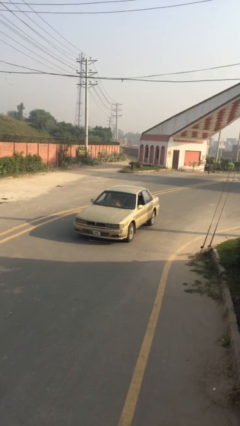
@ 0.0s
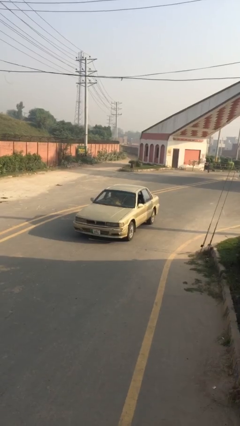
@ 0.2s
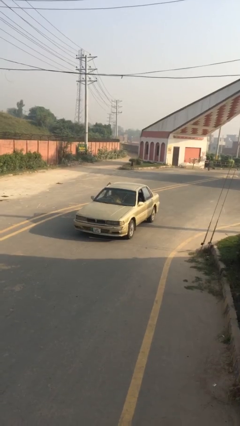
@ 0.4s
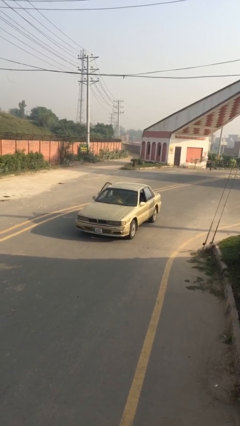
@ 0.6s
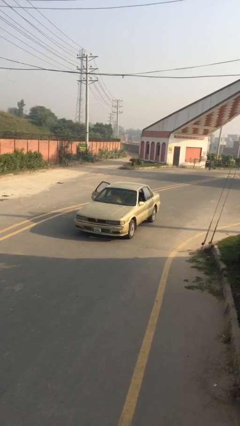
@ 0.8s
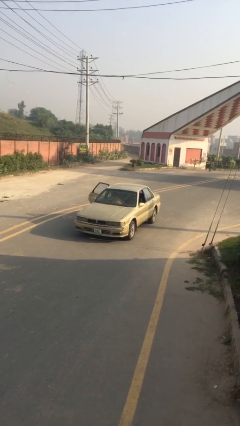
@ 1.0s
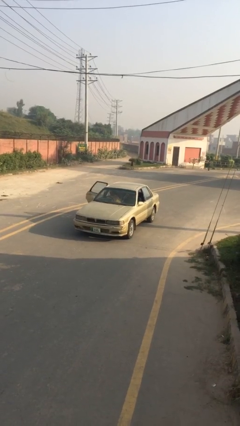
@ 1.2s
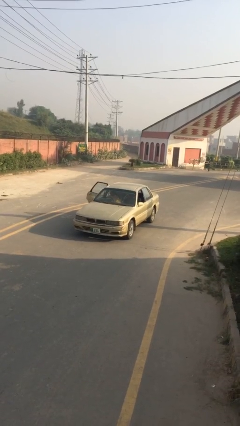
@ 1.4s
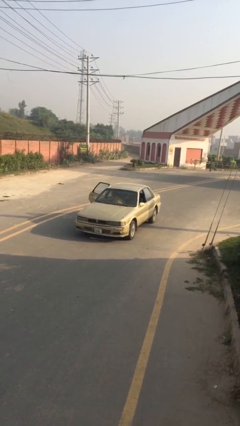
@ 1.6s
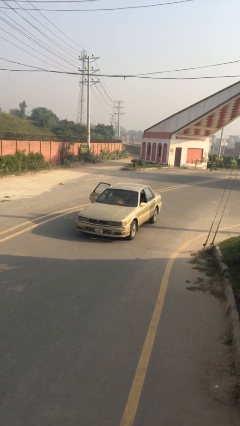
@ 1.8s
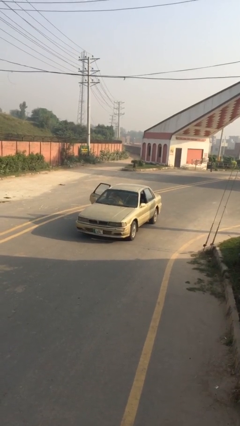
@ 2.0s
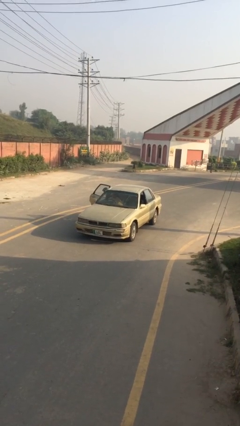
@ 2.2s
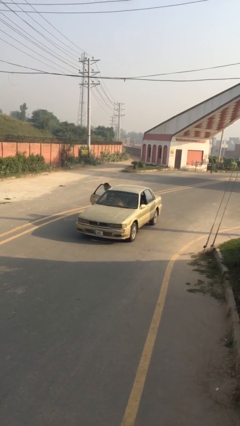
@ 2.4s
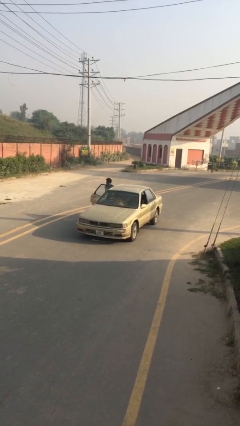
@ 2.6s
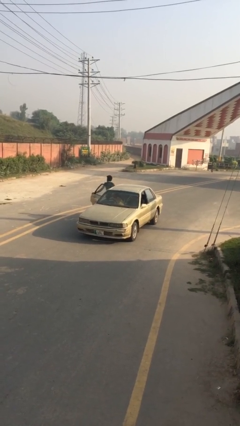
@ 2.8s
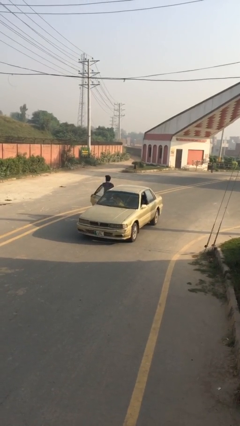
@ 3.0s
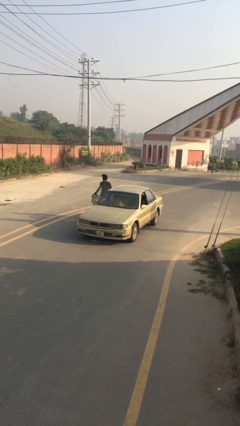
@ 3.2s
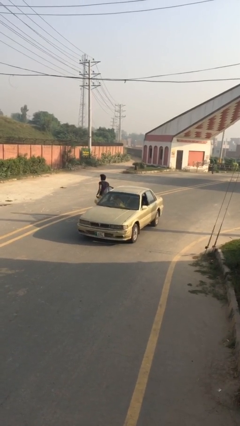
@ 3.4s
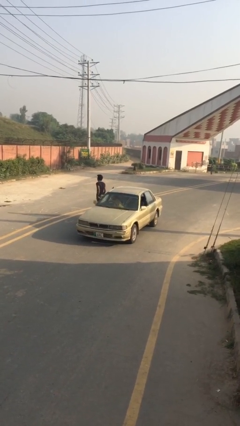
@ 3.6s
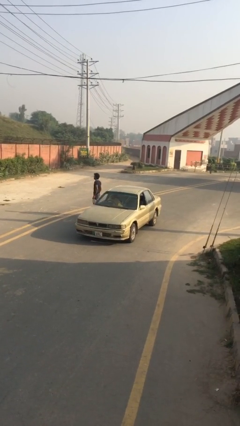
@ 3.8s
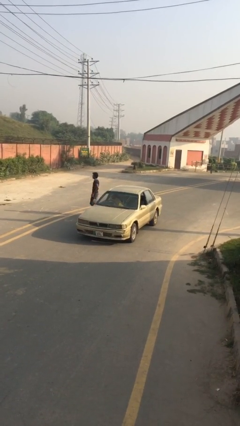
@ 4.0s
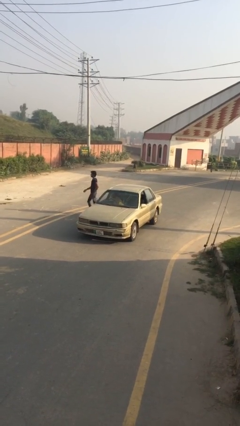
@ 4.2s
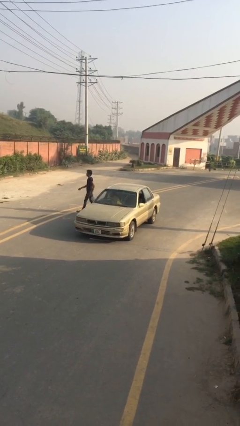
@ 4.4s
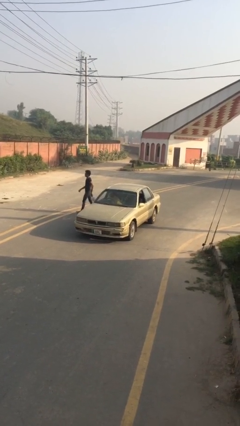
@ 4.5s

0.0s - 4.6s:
car drops off person

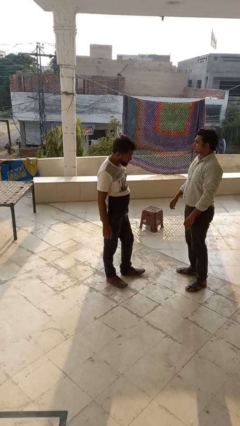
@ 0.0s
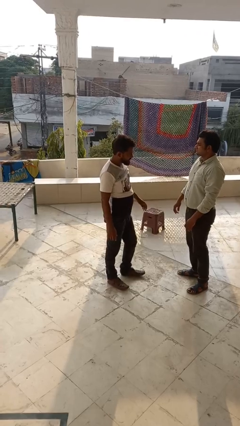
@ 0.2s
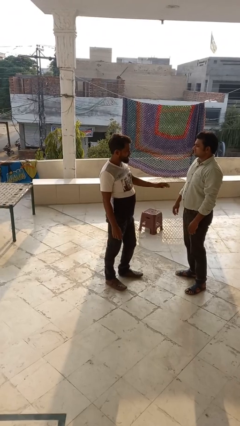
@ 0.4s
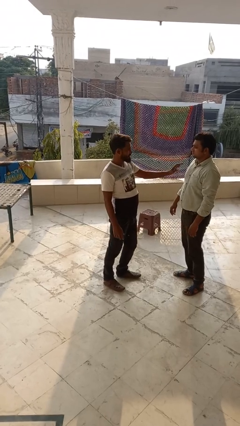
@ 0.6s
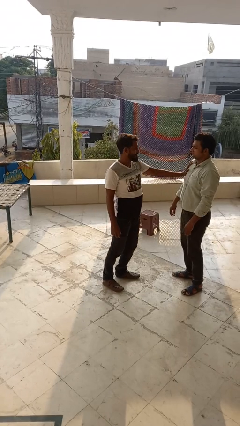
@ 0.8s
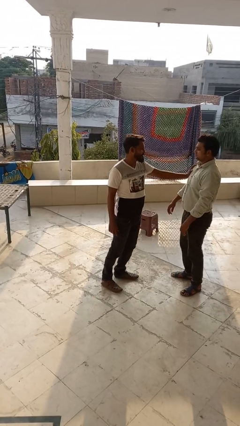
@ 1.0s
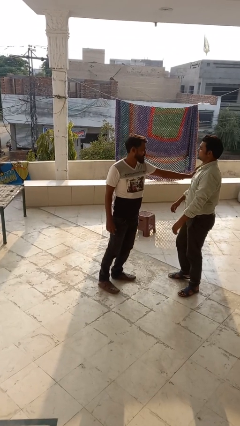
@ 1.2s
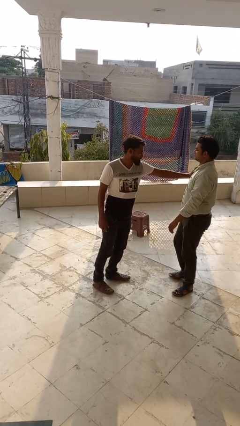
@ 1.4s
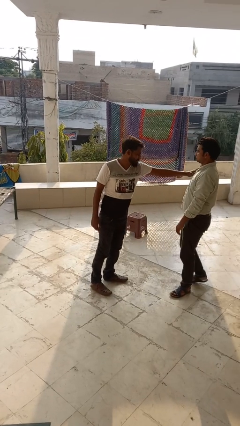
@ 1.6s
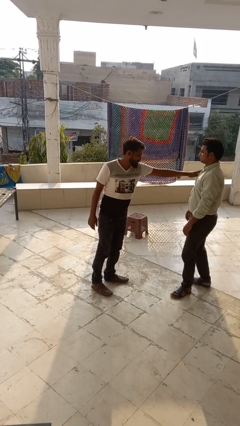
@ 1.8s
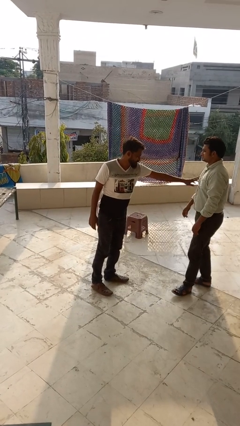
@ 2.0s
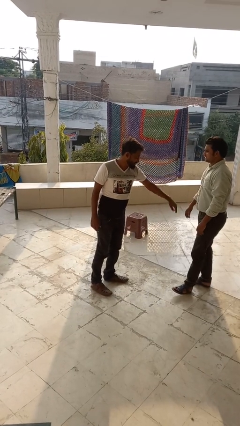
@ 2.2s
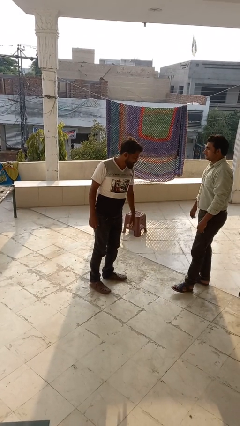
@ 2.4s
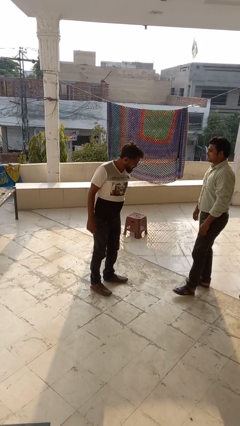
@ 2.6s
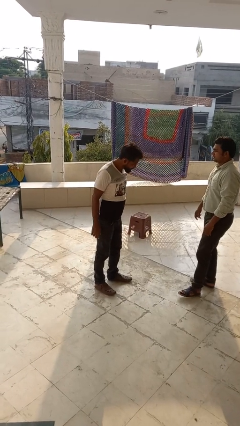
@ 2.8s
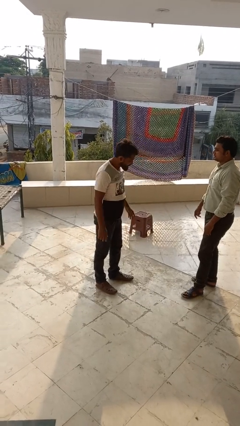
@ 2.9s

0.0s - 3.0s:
person shoves person

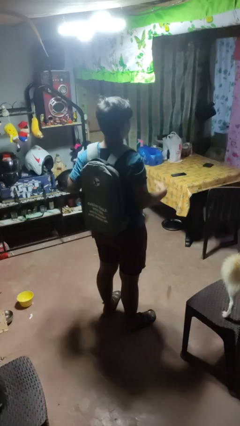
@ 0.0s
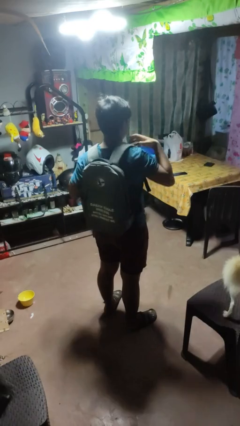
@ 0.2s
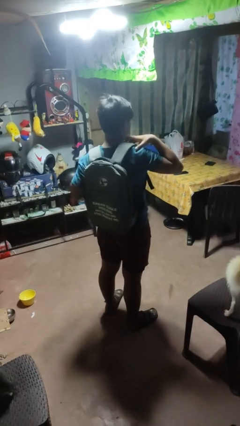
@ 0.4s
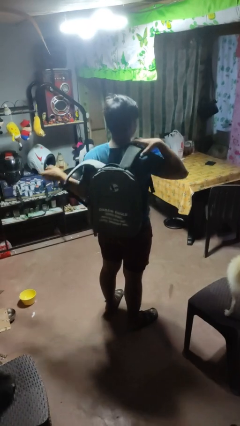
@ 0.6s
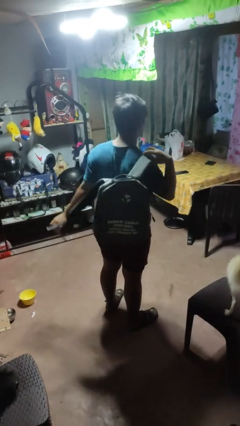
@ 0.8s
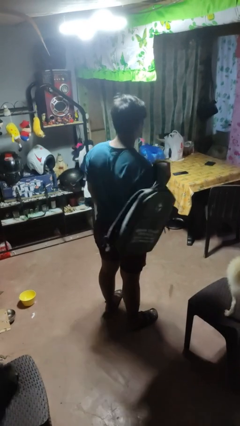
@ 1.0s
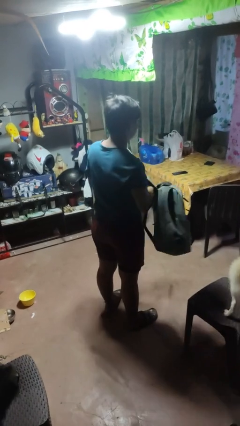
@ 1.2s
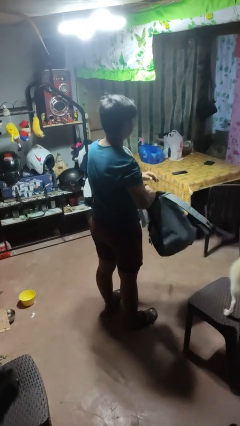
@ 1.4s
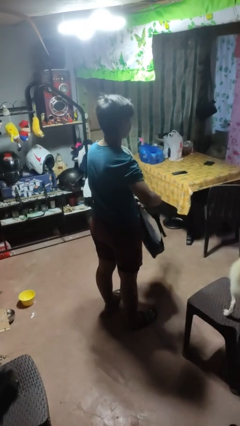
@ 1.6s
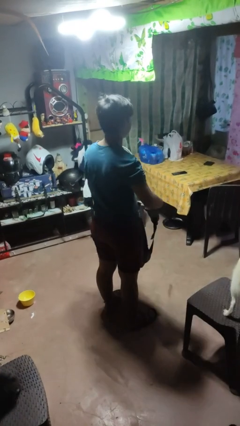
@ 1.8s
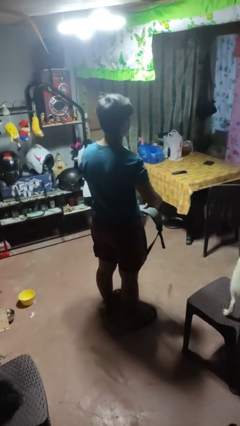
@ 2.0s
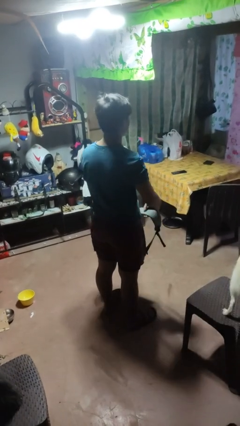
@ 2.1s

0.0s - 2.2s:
person takes off backpack

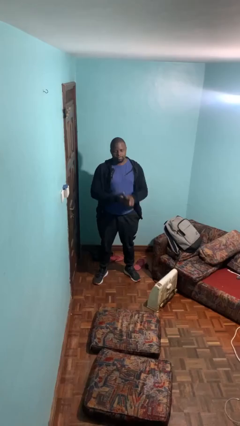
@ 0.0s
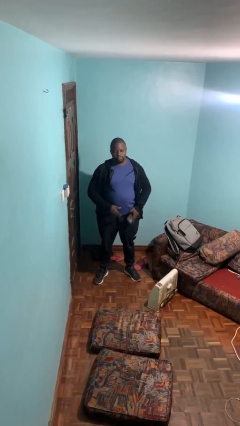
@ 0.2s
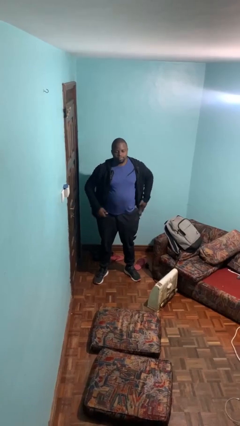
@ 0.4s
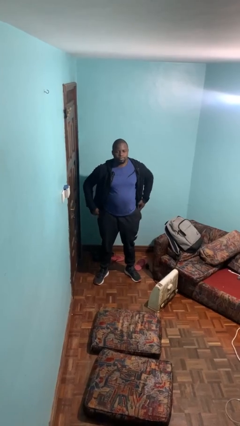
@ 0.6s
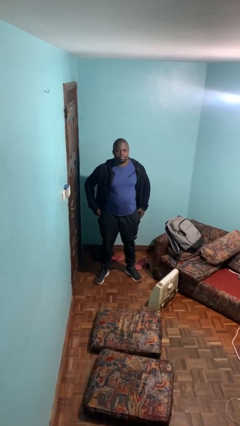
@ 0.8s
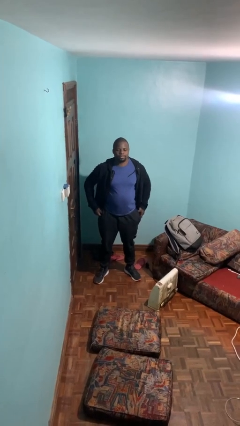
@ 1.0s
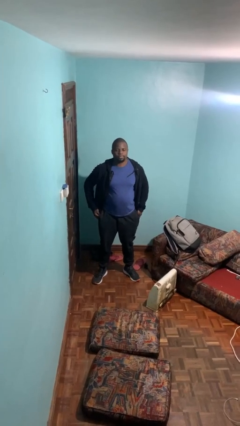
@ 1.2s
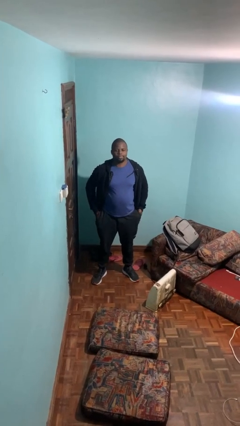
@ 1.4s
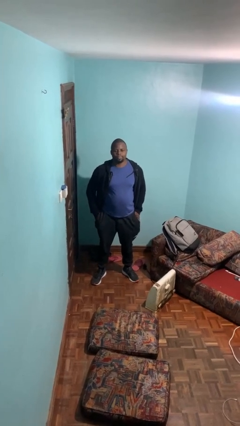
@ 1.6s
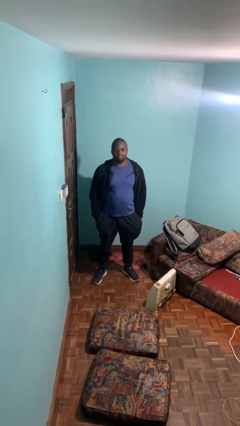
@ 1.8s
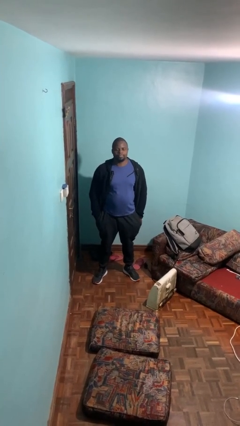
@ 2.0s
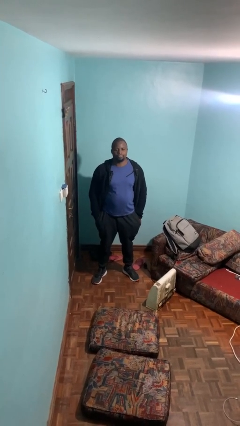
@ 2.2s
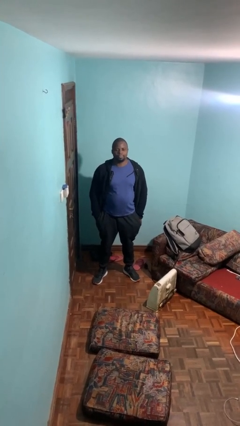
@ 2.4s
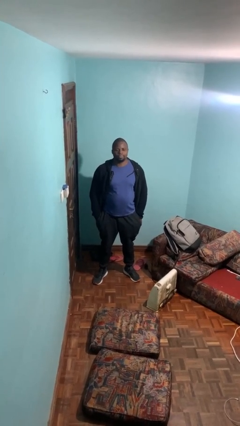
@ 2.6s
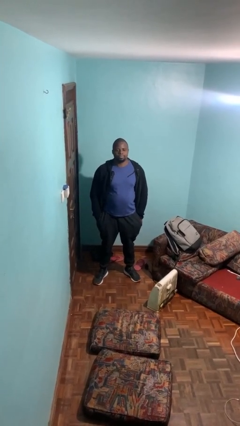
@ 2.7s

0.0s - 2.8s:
person puts phone into pocket

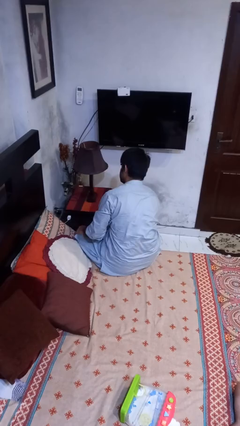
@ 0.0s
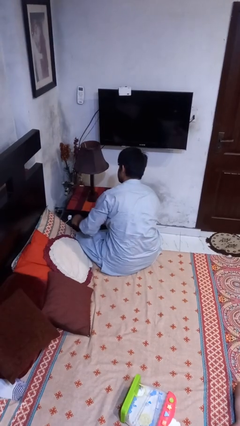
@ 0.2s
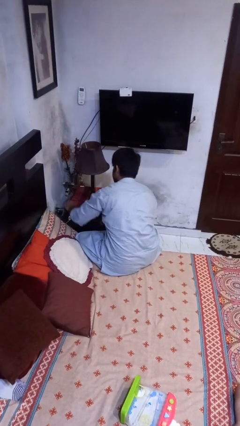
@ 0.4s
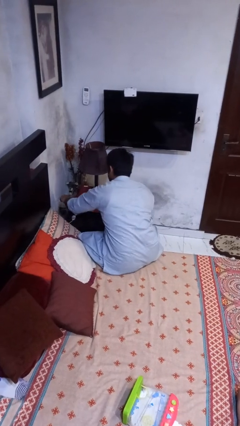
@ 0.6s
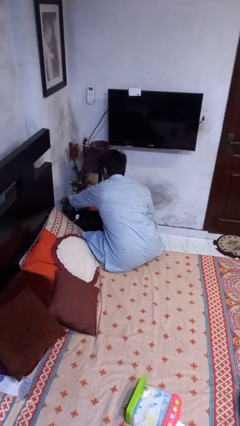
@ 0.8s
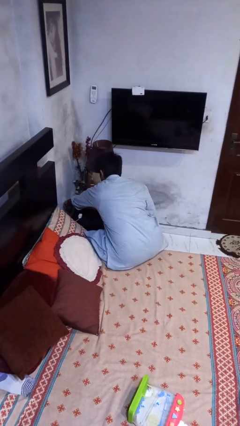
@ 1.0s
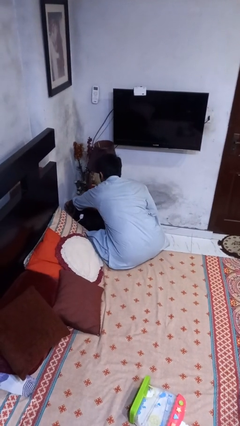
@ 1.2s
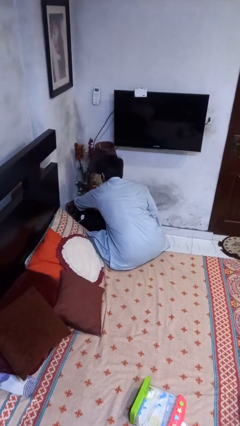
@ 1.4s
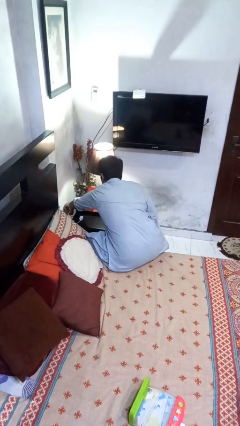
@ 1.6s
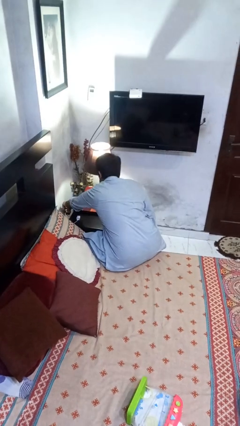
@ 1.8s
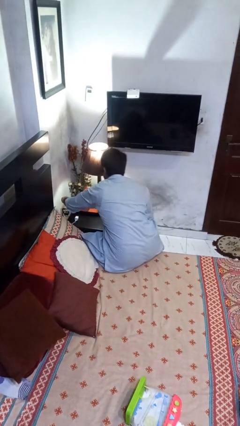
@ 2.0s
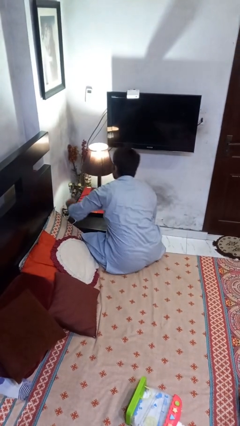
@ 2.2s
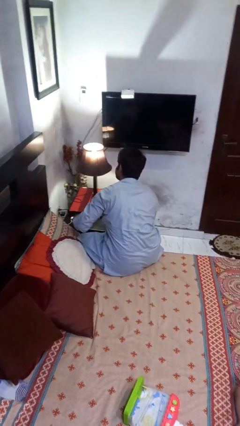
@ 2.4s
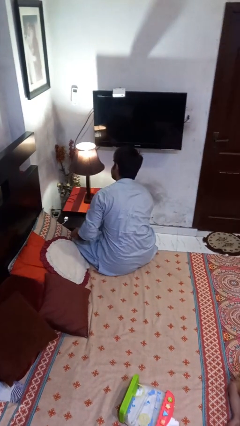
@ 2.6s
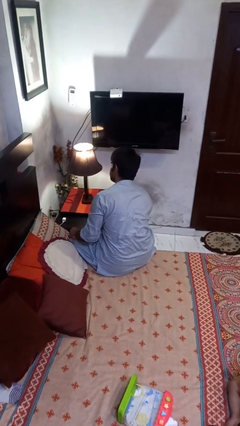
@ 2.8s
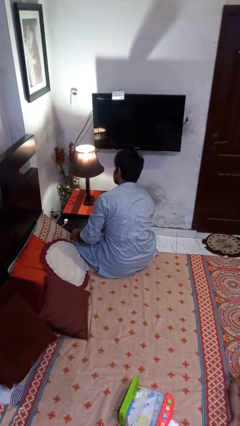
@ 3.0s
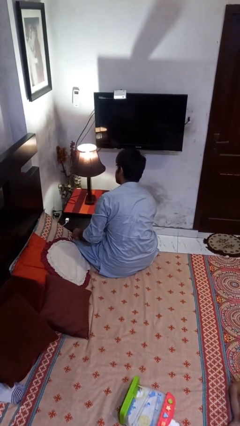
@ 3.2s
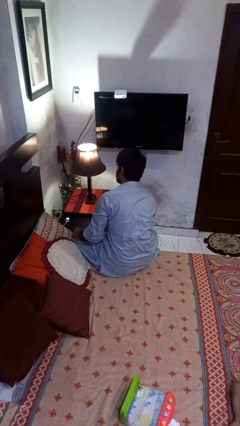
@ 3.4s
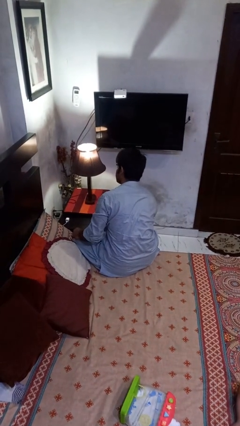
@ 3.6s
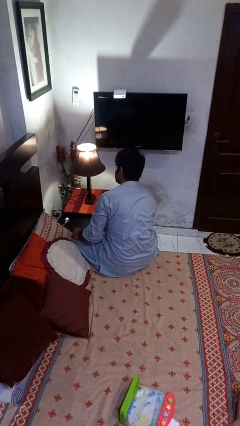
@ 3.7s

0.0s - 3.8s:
person turns on lamp

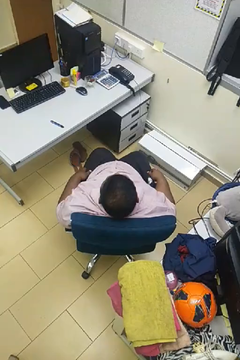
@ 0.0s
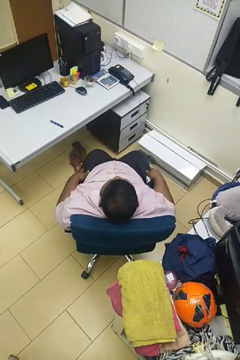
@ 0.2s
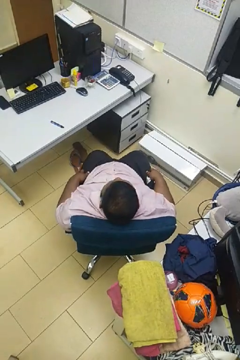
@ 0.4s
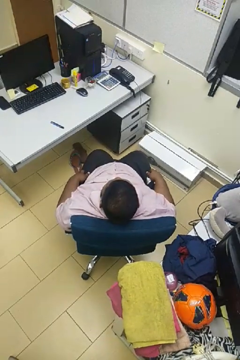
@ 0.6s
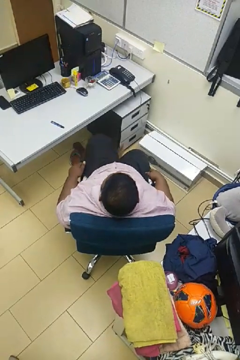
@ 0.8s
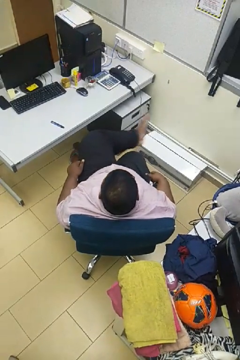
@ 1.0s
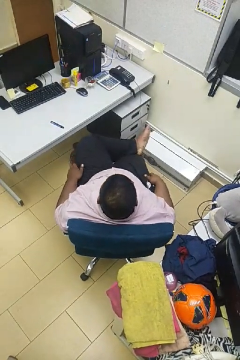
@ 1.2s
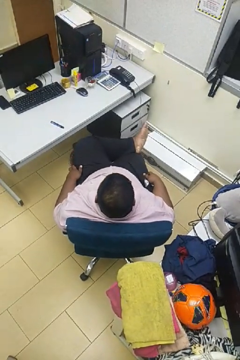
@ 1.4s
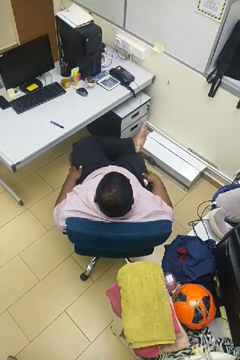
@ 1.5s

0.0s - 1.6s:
person crosses legs
